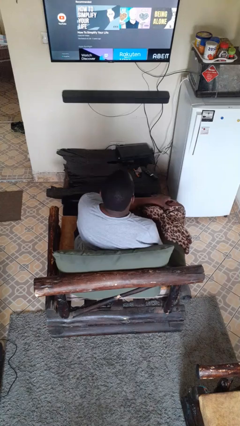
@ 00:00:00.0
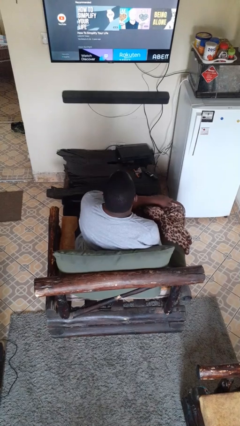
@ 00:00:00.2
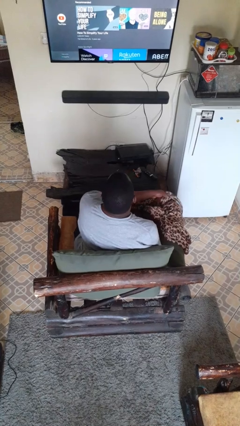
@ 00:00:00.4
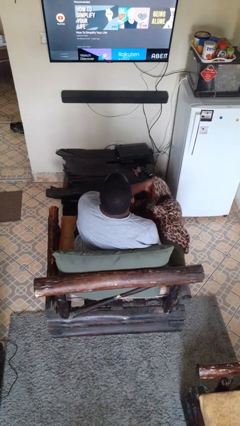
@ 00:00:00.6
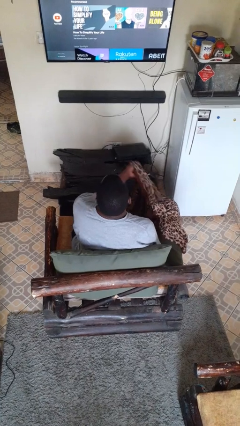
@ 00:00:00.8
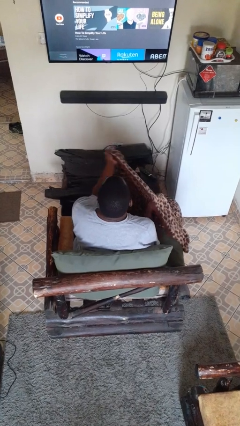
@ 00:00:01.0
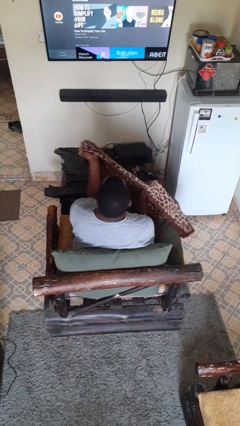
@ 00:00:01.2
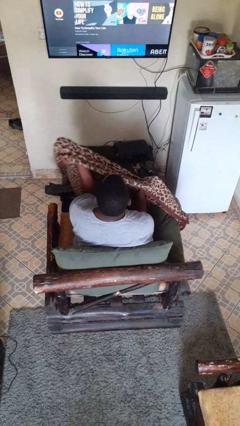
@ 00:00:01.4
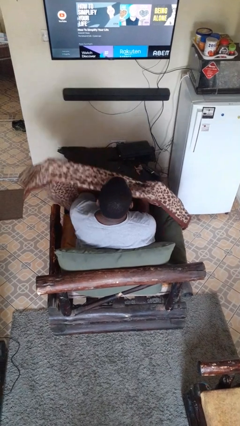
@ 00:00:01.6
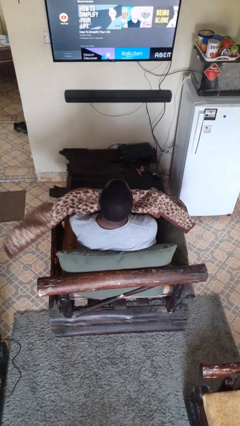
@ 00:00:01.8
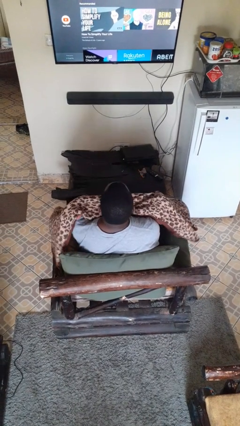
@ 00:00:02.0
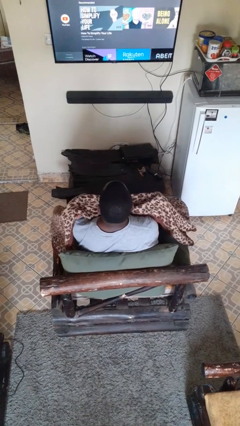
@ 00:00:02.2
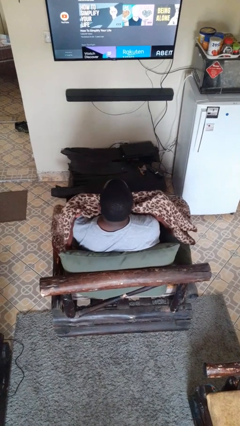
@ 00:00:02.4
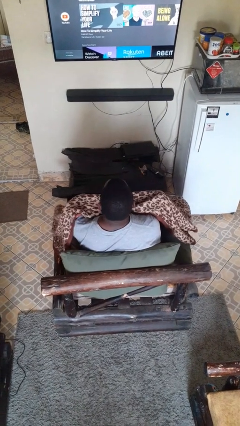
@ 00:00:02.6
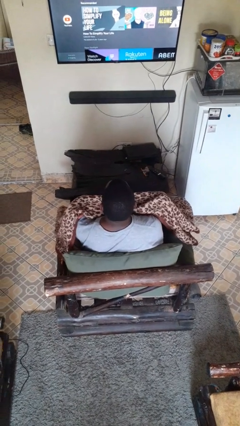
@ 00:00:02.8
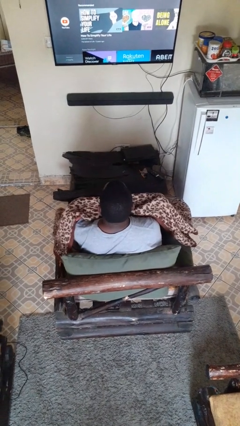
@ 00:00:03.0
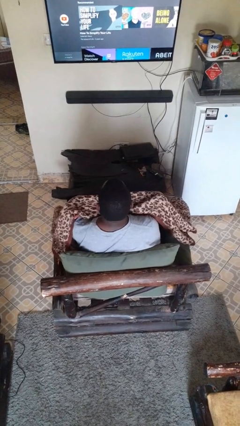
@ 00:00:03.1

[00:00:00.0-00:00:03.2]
person covers with blanket

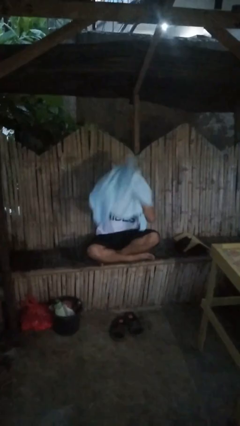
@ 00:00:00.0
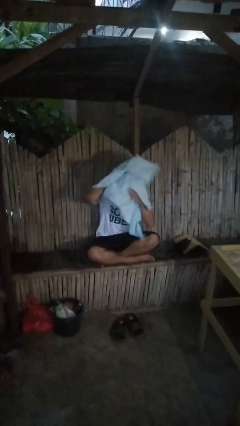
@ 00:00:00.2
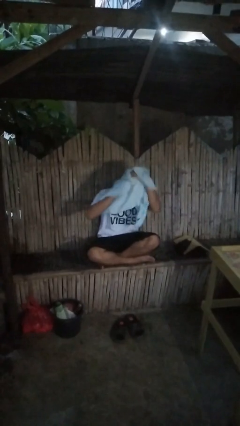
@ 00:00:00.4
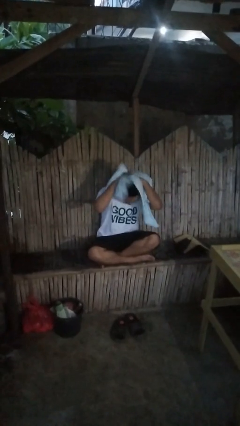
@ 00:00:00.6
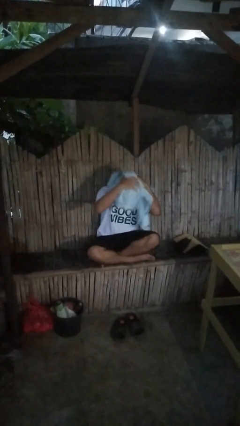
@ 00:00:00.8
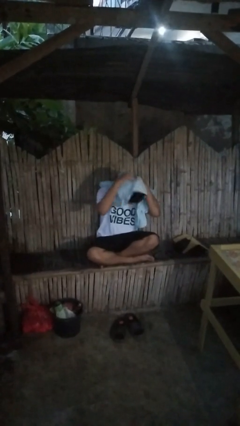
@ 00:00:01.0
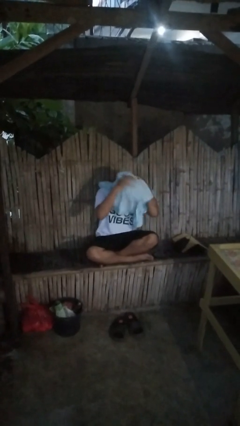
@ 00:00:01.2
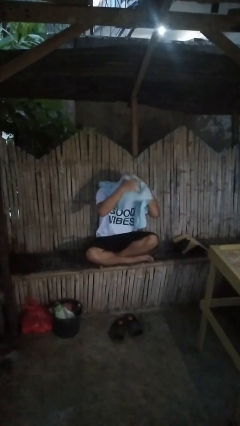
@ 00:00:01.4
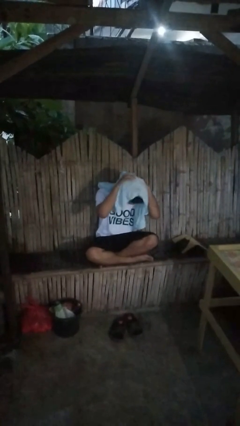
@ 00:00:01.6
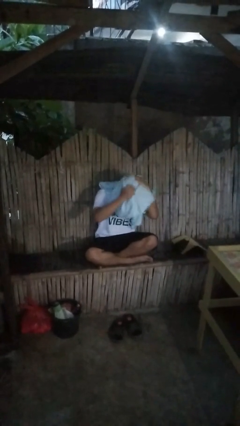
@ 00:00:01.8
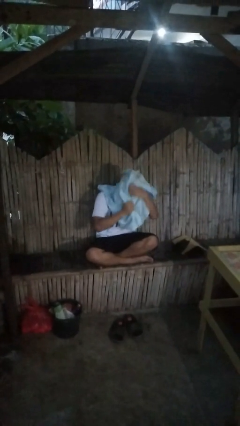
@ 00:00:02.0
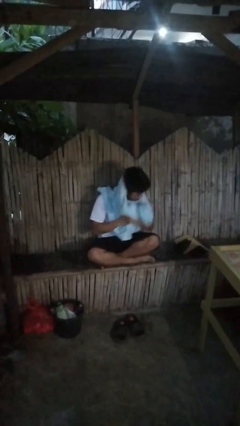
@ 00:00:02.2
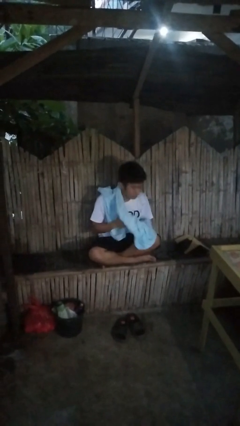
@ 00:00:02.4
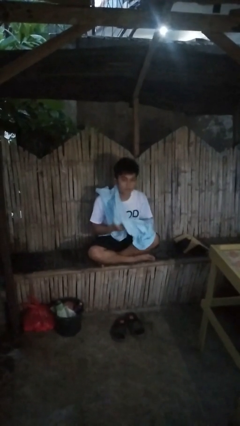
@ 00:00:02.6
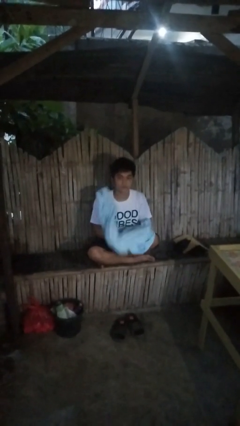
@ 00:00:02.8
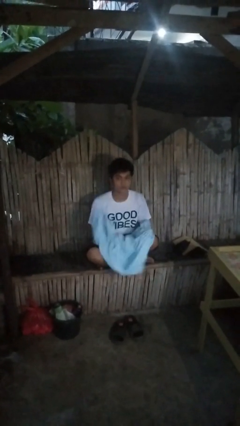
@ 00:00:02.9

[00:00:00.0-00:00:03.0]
person dries hair with towel

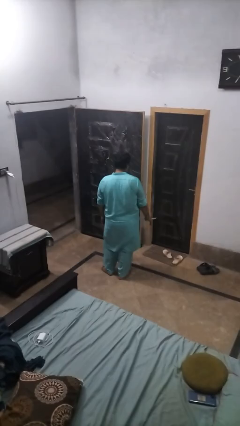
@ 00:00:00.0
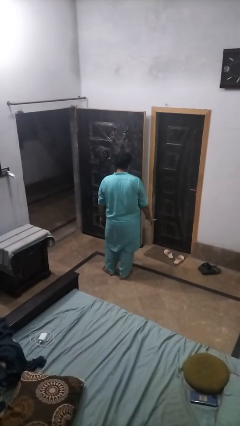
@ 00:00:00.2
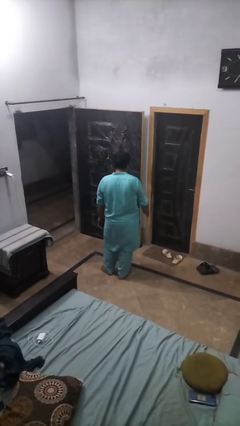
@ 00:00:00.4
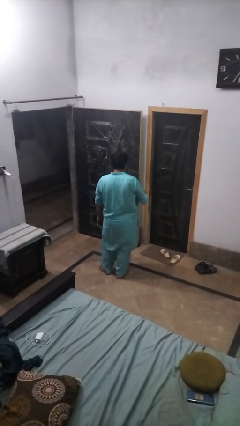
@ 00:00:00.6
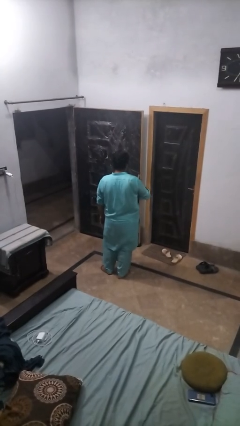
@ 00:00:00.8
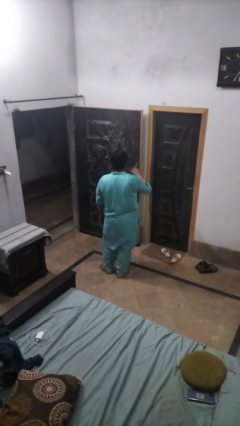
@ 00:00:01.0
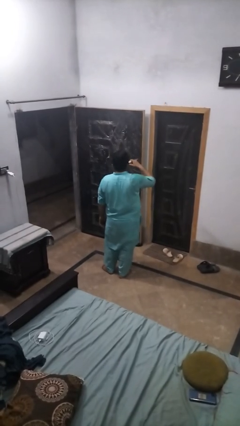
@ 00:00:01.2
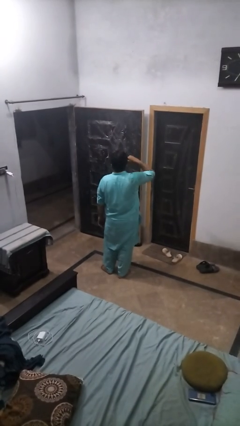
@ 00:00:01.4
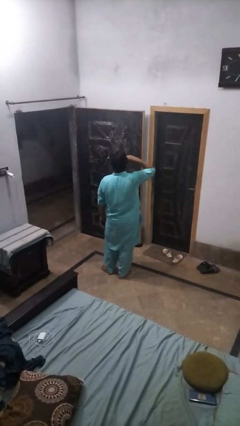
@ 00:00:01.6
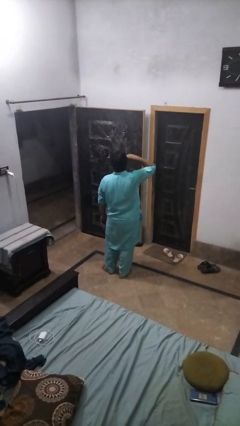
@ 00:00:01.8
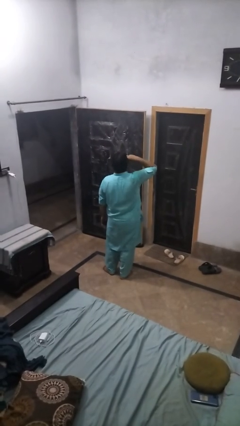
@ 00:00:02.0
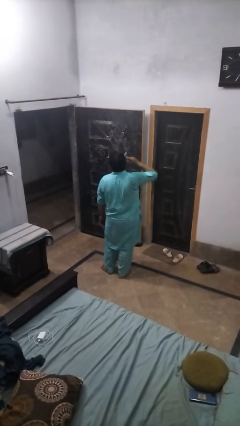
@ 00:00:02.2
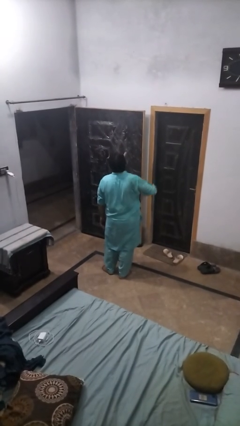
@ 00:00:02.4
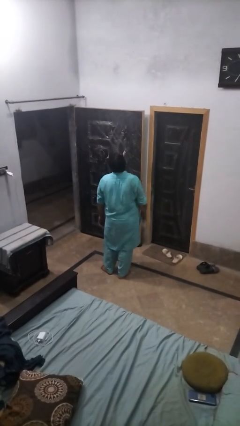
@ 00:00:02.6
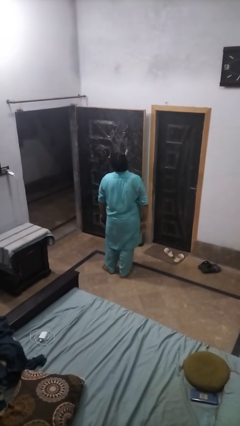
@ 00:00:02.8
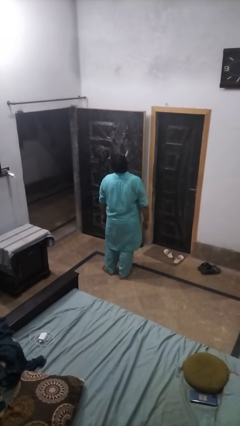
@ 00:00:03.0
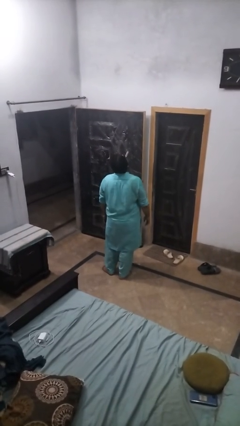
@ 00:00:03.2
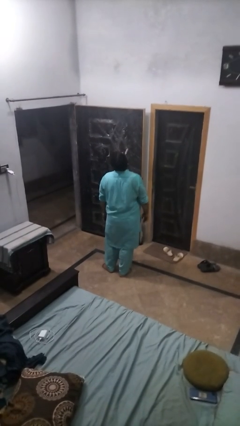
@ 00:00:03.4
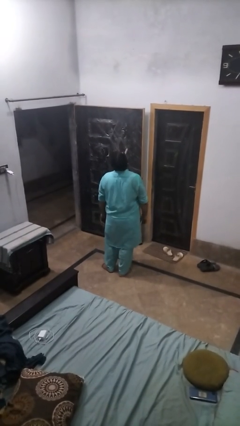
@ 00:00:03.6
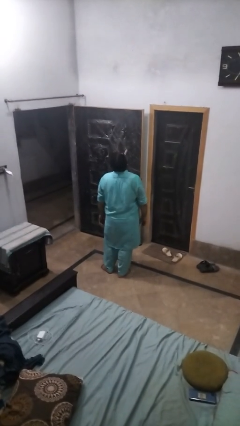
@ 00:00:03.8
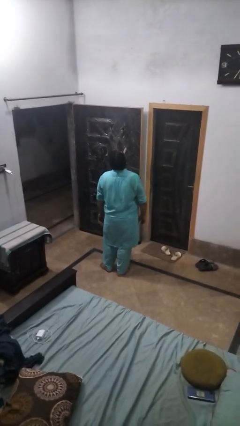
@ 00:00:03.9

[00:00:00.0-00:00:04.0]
person vapes

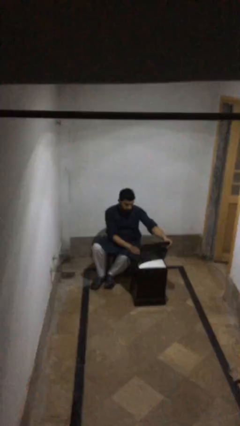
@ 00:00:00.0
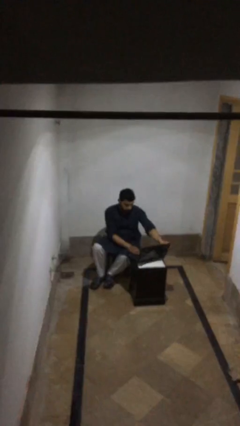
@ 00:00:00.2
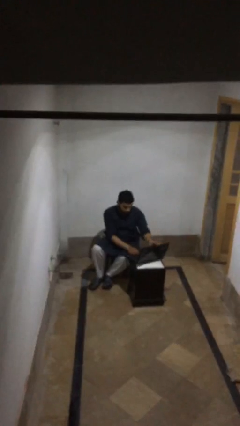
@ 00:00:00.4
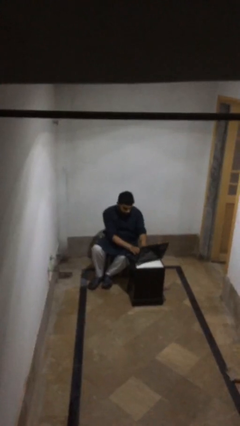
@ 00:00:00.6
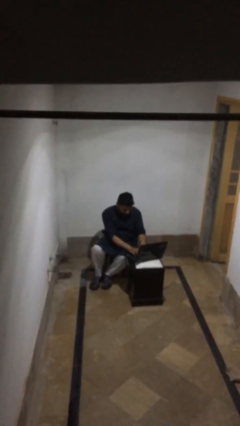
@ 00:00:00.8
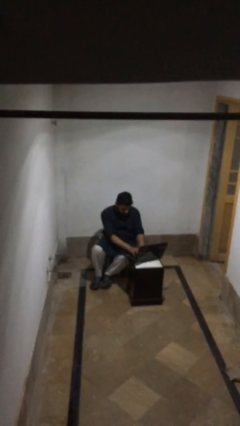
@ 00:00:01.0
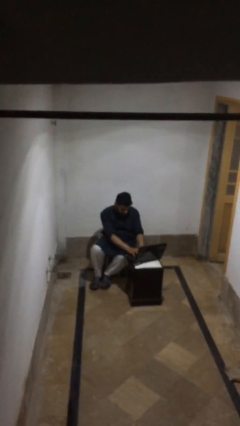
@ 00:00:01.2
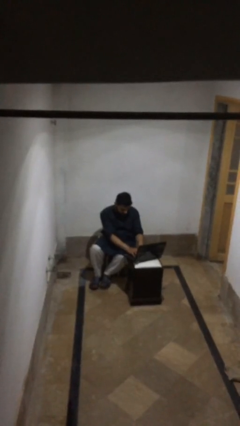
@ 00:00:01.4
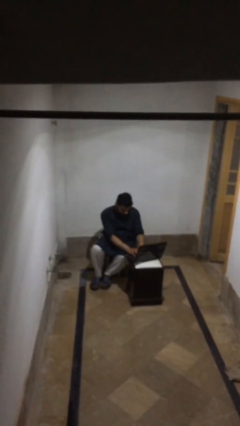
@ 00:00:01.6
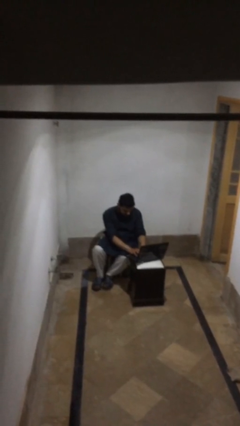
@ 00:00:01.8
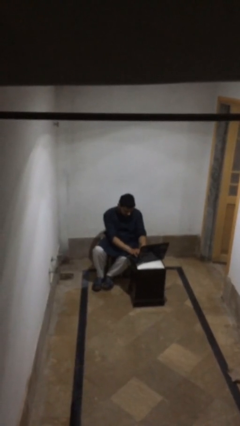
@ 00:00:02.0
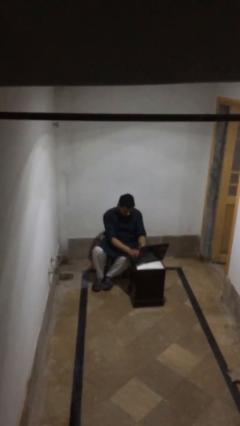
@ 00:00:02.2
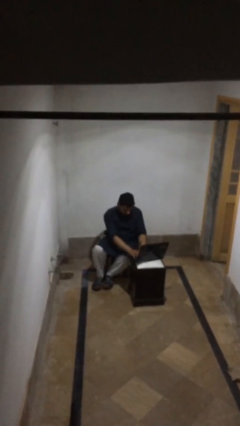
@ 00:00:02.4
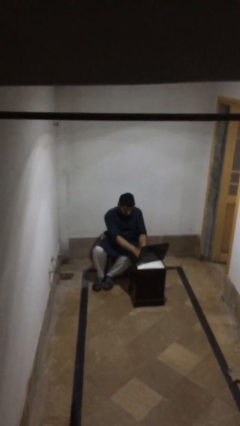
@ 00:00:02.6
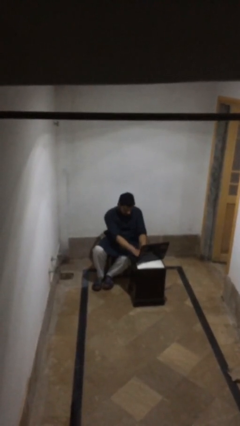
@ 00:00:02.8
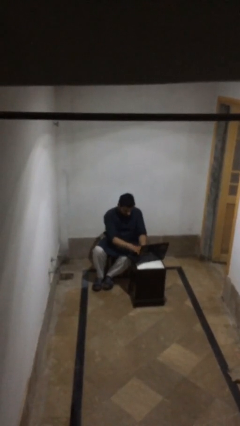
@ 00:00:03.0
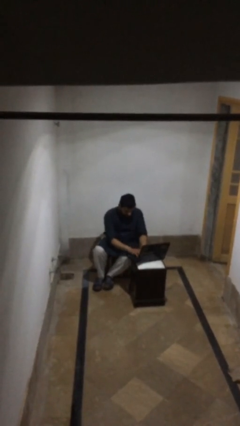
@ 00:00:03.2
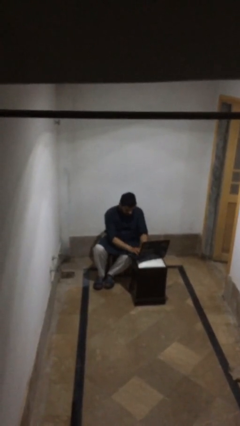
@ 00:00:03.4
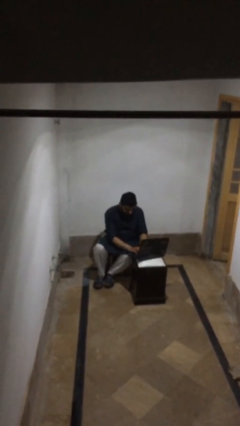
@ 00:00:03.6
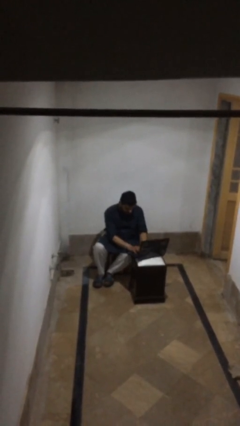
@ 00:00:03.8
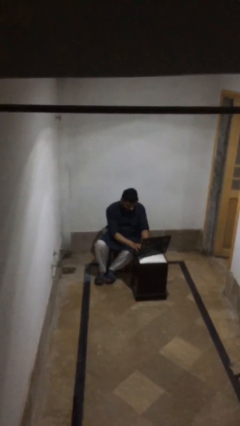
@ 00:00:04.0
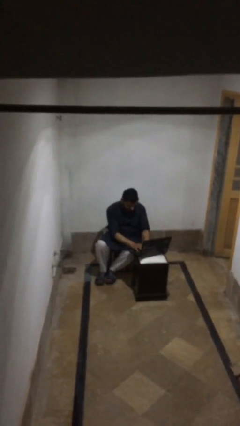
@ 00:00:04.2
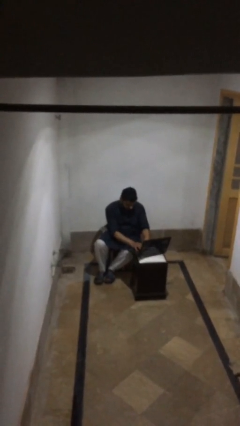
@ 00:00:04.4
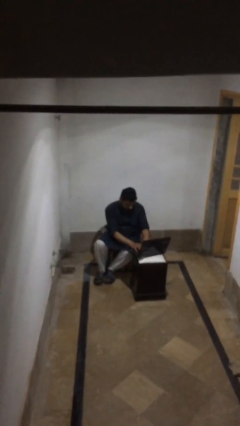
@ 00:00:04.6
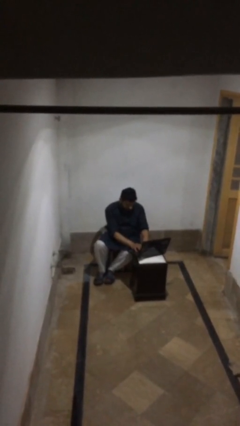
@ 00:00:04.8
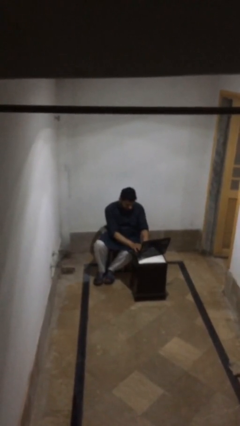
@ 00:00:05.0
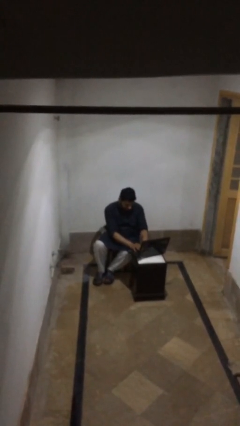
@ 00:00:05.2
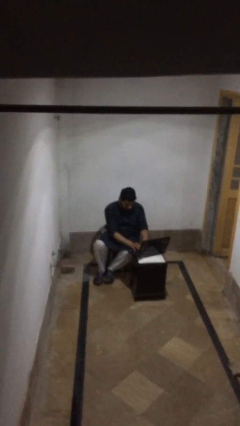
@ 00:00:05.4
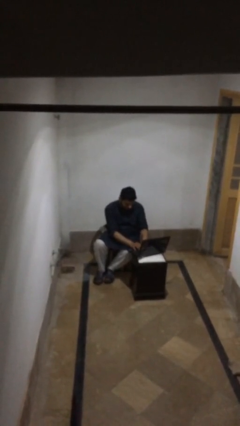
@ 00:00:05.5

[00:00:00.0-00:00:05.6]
person interacts with laptop

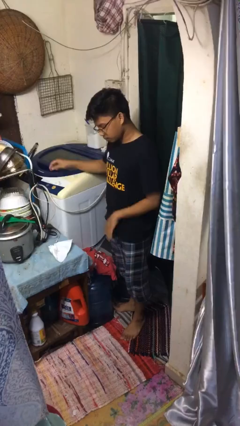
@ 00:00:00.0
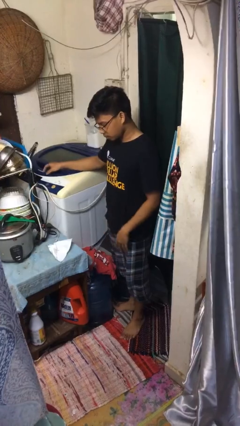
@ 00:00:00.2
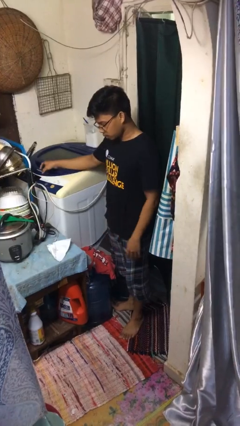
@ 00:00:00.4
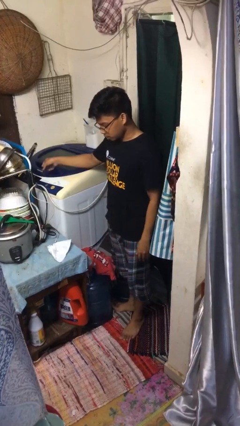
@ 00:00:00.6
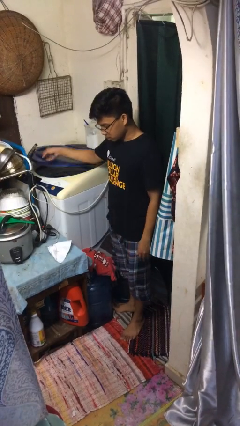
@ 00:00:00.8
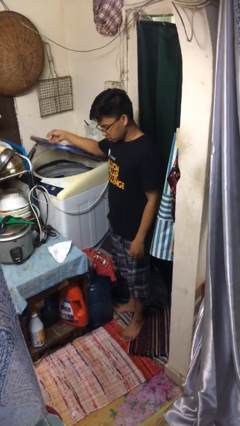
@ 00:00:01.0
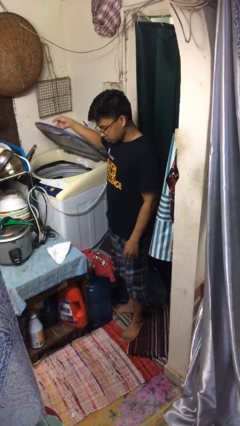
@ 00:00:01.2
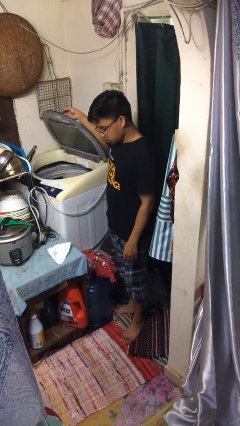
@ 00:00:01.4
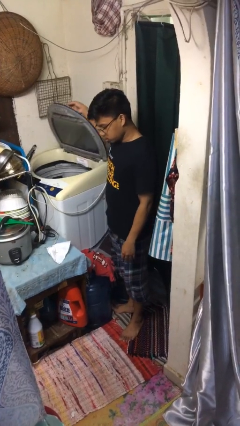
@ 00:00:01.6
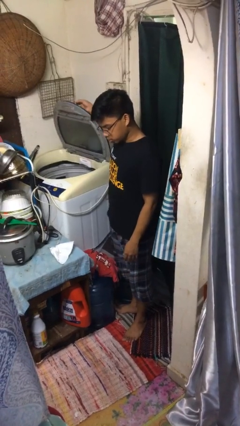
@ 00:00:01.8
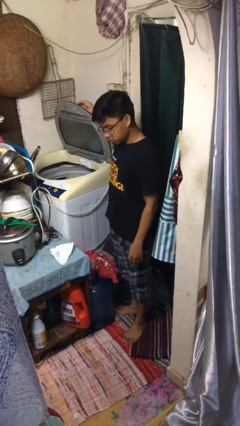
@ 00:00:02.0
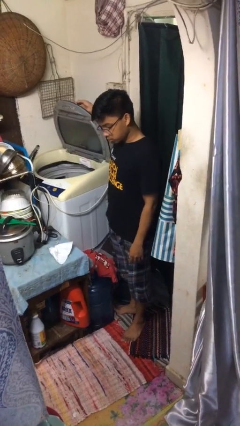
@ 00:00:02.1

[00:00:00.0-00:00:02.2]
person opens clothes washer
